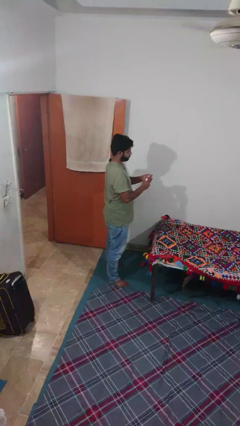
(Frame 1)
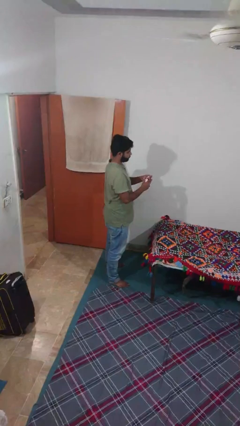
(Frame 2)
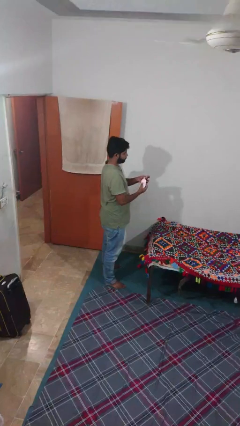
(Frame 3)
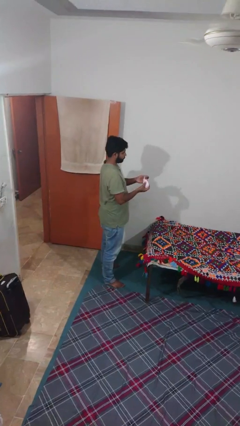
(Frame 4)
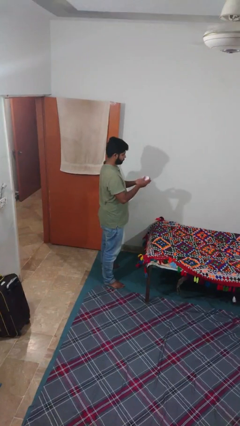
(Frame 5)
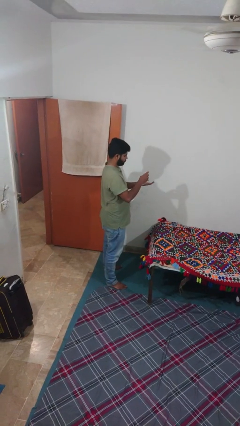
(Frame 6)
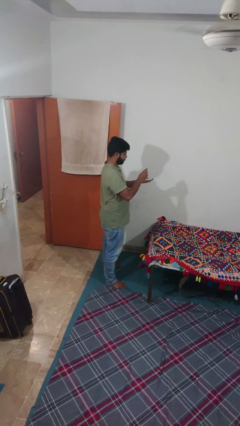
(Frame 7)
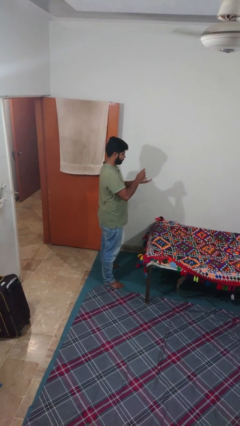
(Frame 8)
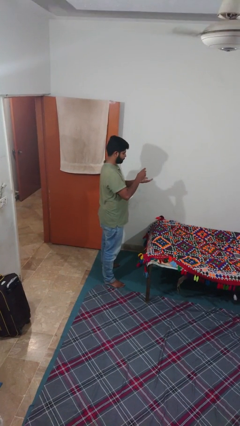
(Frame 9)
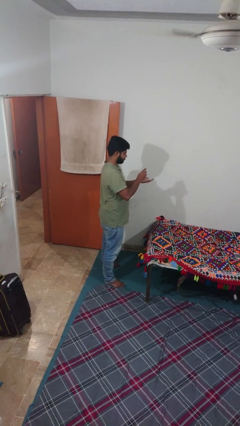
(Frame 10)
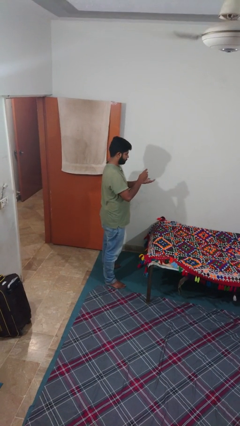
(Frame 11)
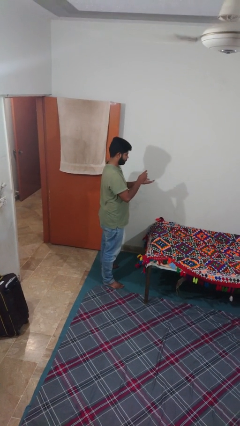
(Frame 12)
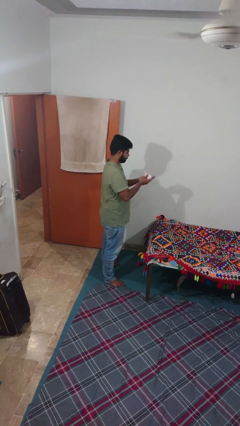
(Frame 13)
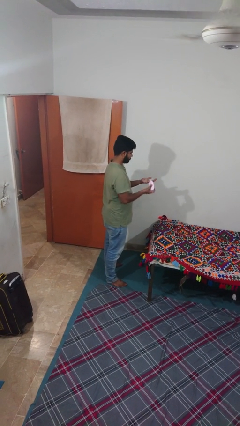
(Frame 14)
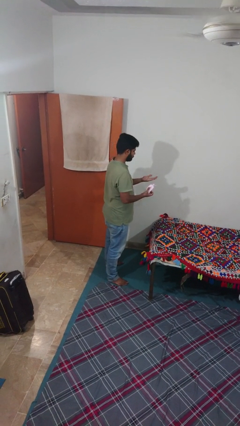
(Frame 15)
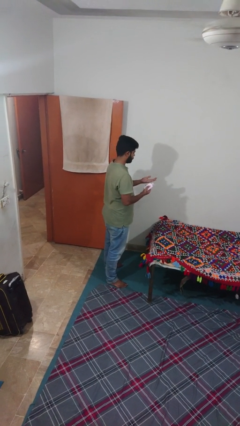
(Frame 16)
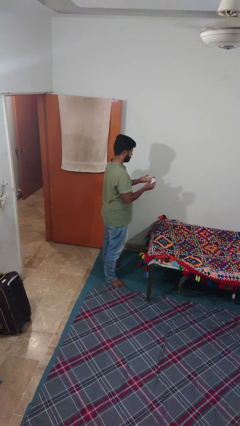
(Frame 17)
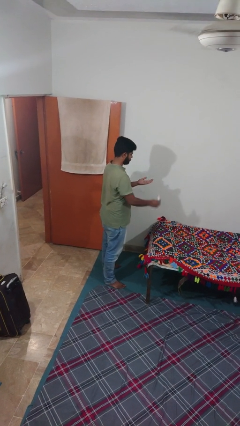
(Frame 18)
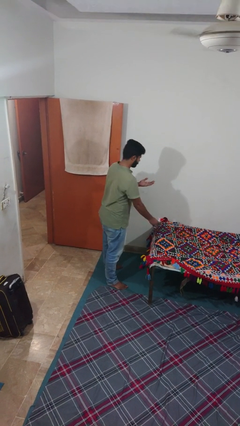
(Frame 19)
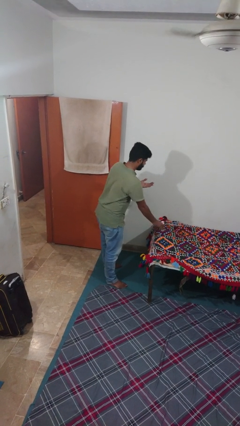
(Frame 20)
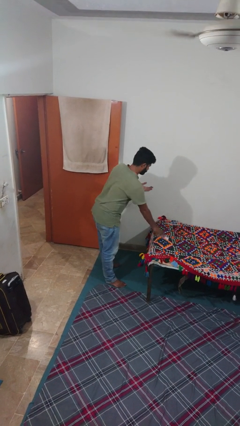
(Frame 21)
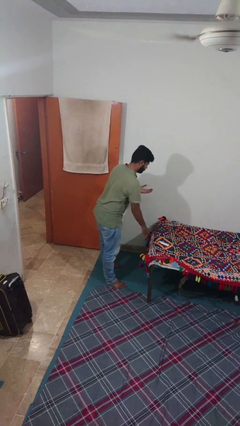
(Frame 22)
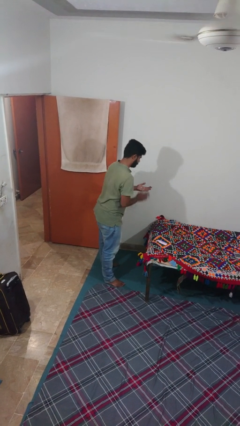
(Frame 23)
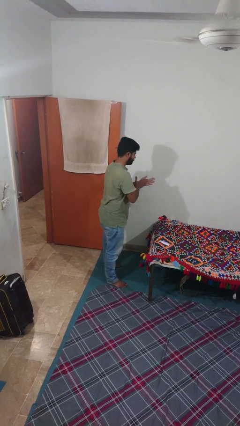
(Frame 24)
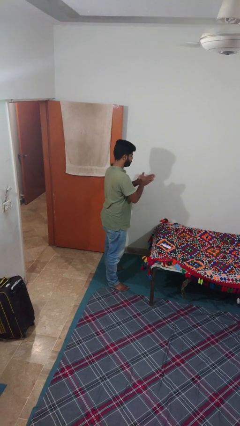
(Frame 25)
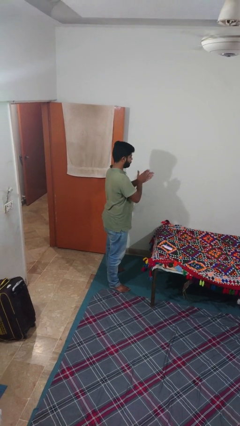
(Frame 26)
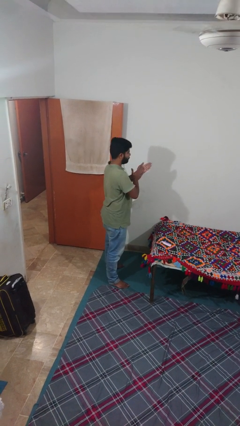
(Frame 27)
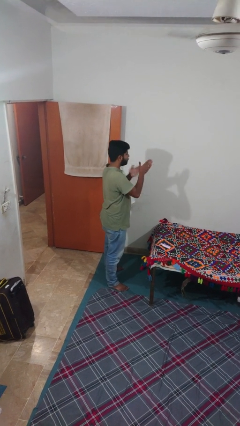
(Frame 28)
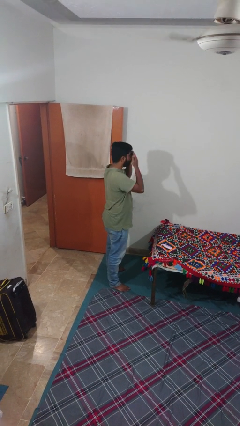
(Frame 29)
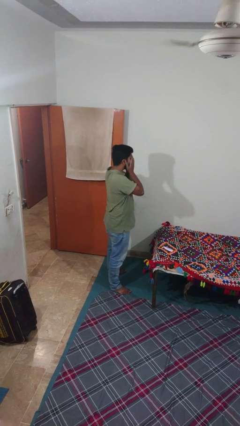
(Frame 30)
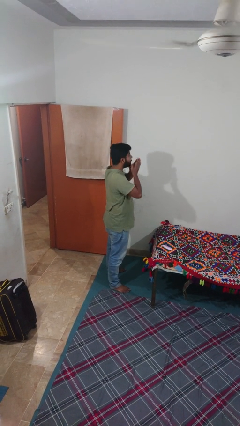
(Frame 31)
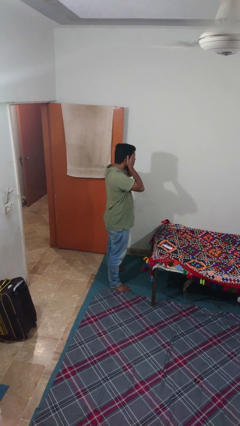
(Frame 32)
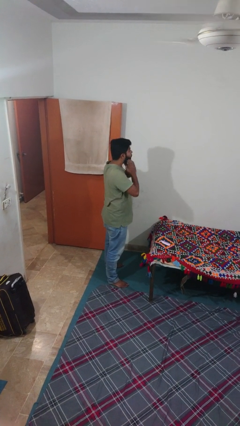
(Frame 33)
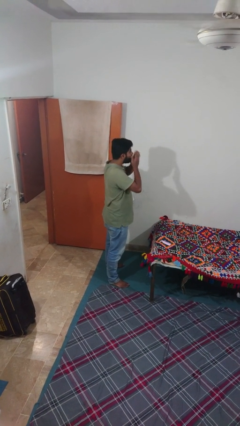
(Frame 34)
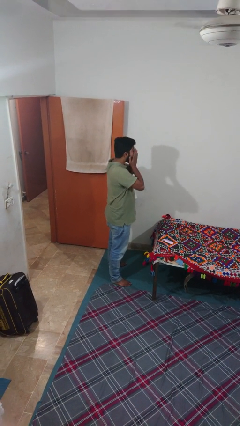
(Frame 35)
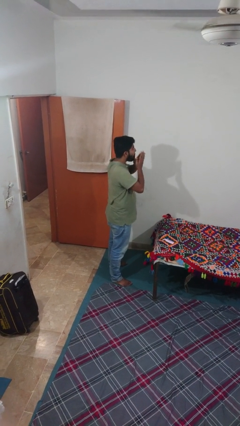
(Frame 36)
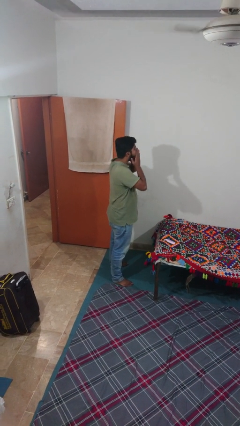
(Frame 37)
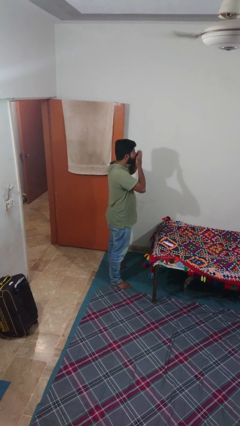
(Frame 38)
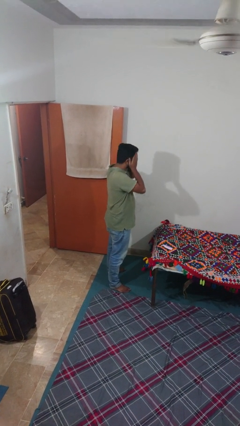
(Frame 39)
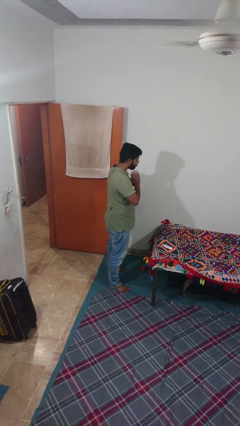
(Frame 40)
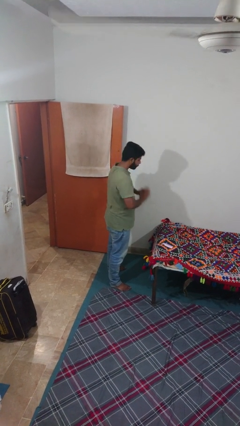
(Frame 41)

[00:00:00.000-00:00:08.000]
person applies facial moisturizer

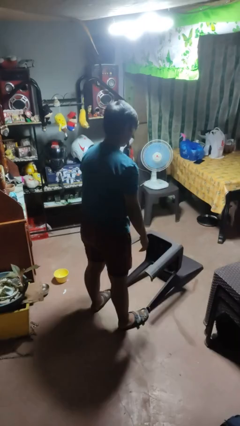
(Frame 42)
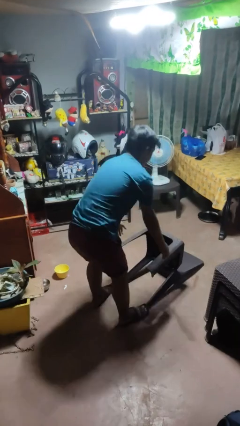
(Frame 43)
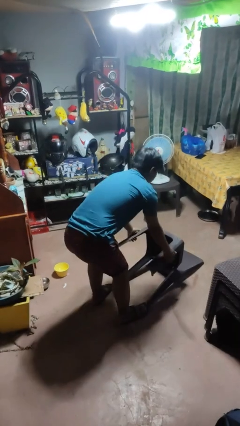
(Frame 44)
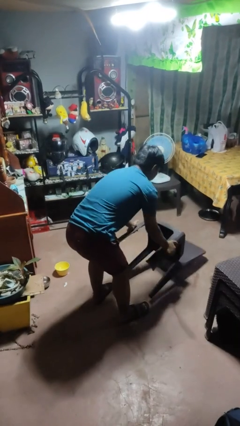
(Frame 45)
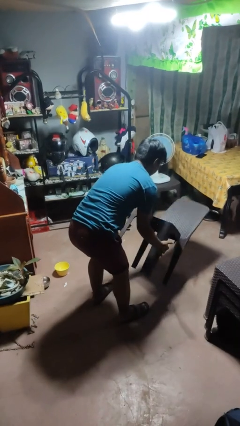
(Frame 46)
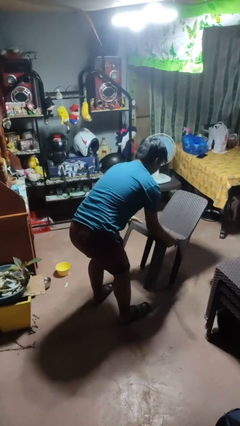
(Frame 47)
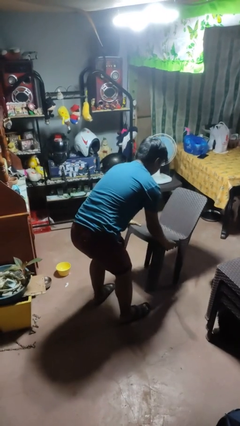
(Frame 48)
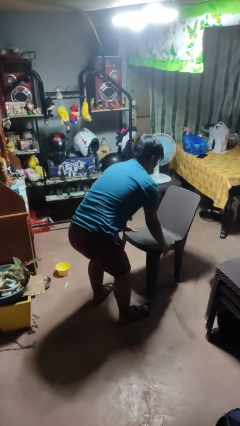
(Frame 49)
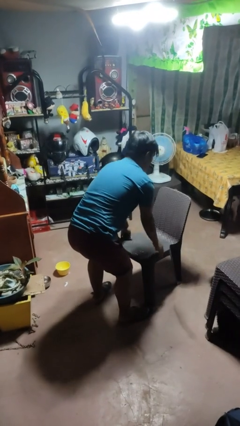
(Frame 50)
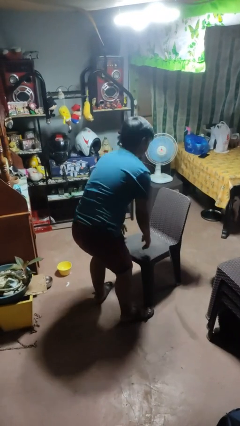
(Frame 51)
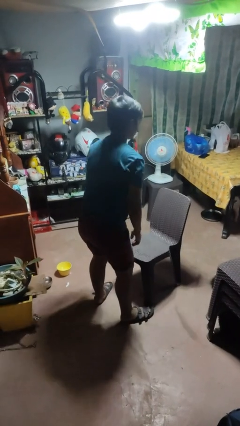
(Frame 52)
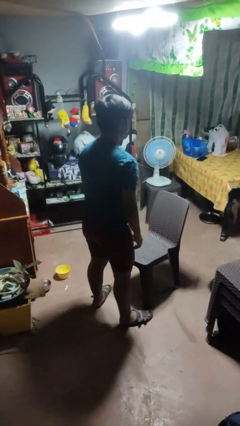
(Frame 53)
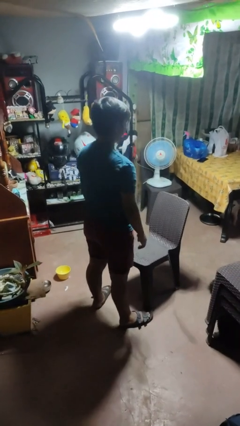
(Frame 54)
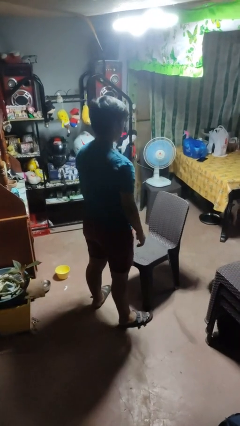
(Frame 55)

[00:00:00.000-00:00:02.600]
person sets upright furniture

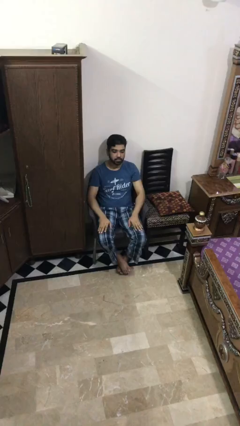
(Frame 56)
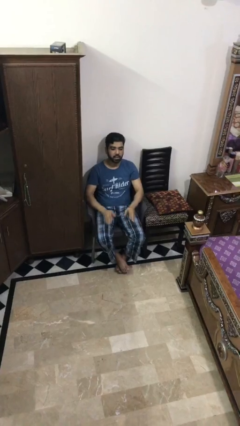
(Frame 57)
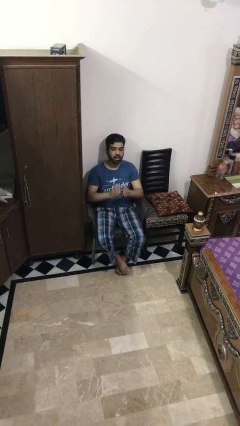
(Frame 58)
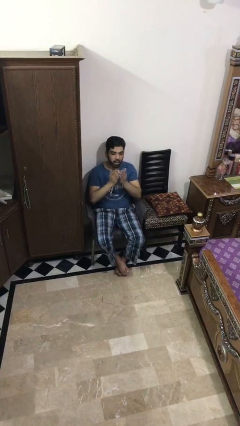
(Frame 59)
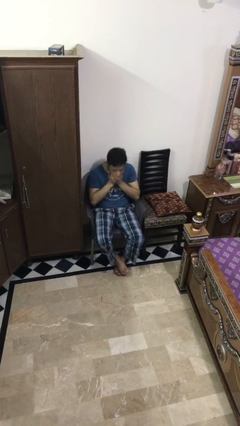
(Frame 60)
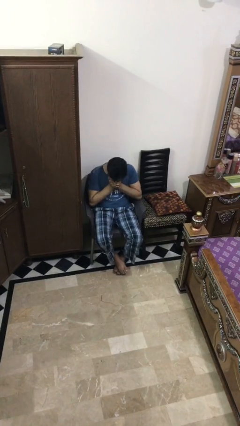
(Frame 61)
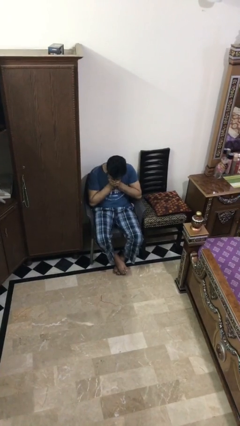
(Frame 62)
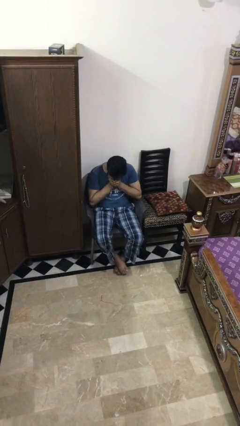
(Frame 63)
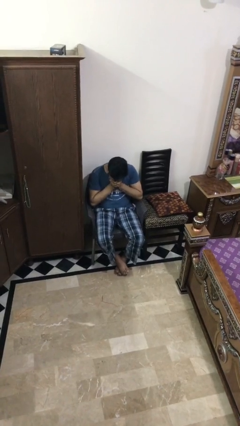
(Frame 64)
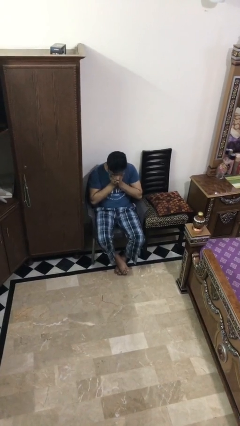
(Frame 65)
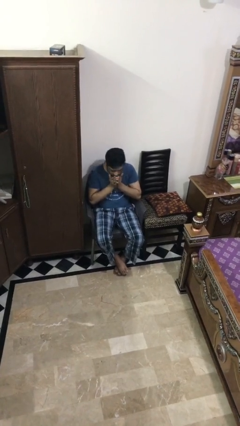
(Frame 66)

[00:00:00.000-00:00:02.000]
person sneezes into hand

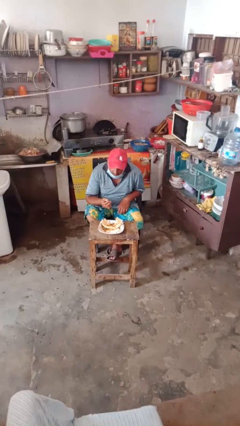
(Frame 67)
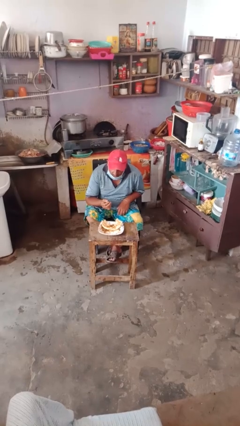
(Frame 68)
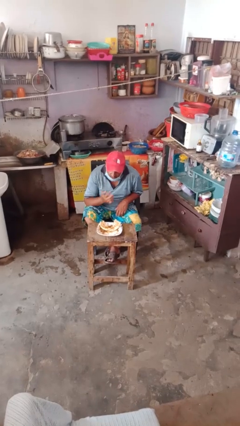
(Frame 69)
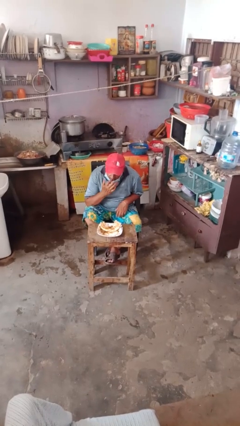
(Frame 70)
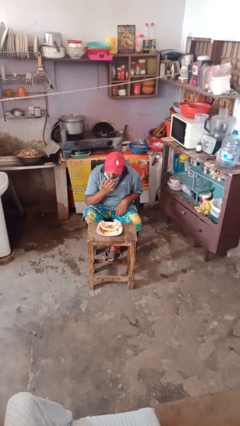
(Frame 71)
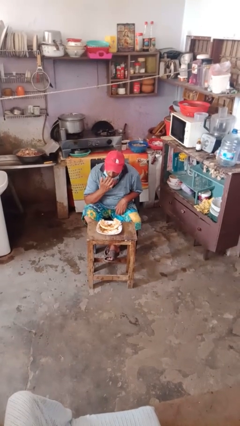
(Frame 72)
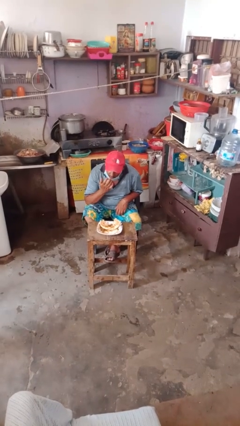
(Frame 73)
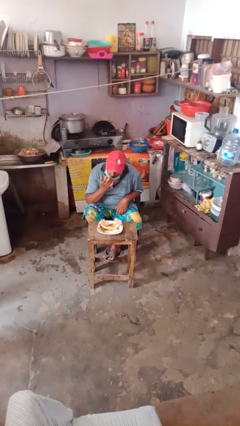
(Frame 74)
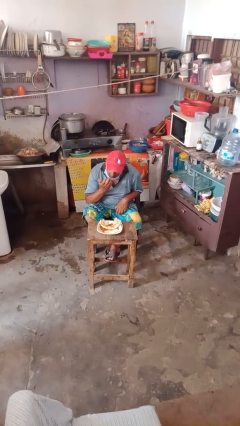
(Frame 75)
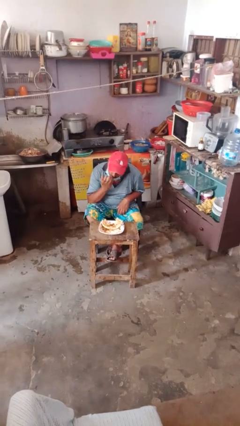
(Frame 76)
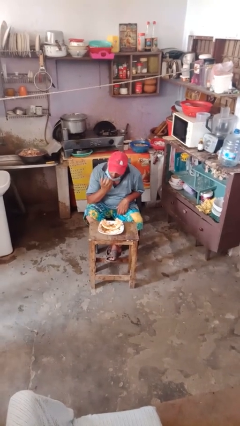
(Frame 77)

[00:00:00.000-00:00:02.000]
person licks fingers

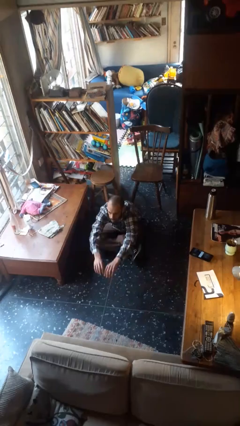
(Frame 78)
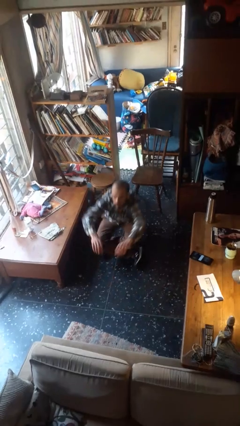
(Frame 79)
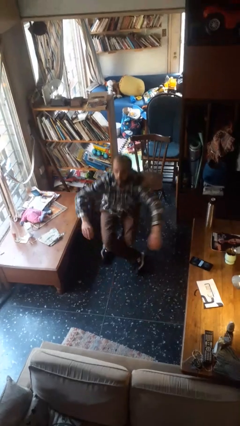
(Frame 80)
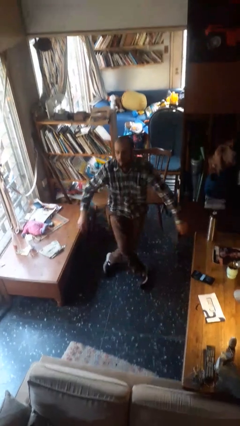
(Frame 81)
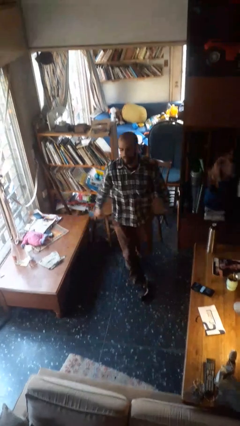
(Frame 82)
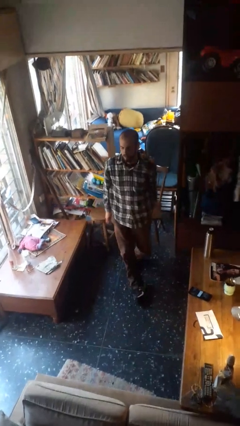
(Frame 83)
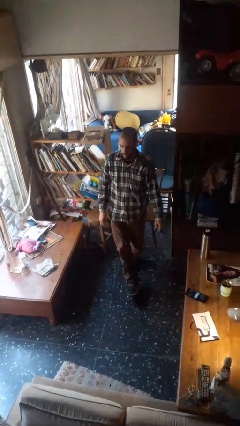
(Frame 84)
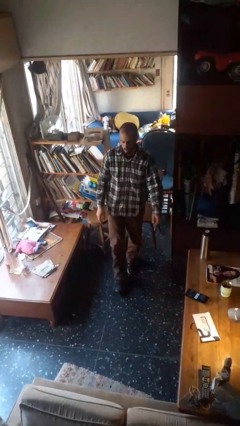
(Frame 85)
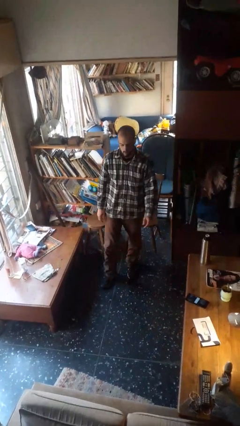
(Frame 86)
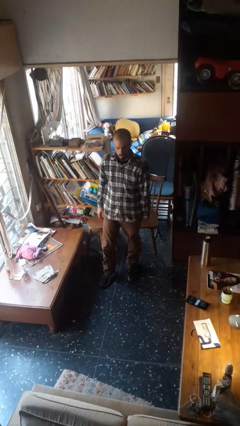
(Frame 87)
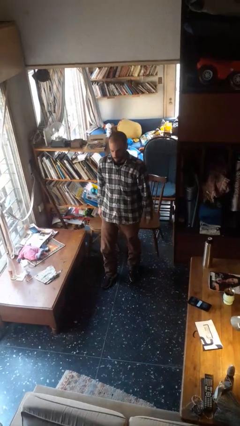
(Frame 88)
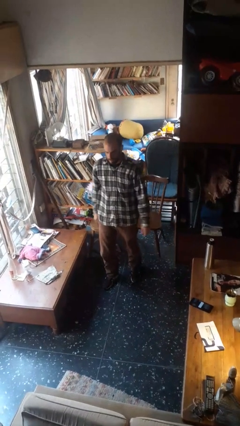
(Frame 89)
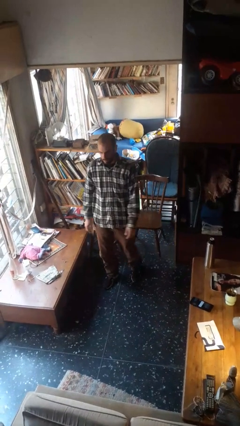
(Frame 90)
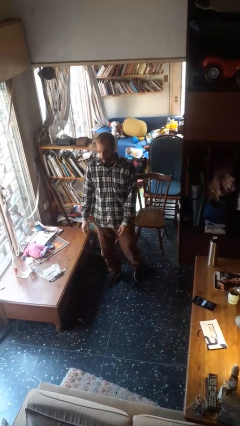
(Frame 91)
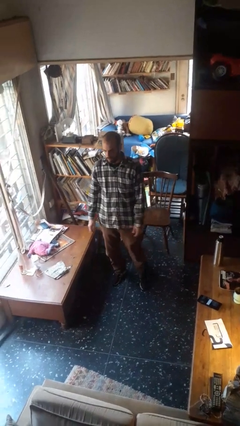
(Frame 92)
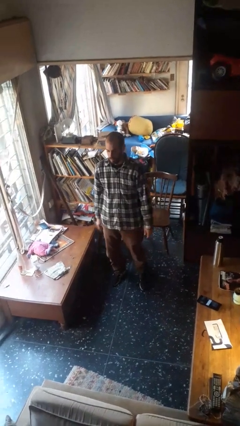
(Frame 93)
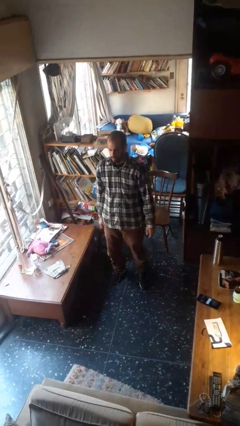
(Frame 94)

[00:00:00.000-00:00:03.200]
person stands up from floor

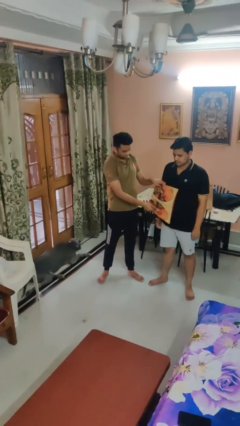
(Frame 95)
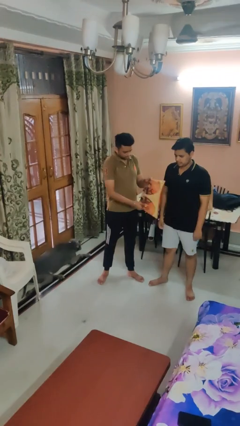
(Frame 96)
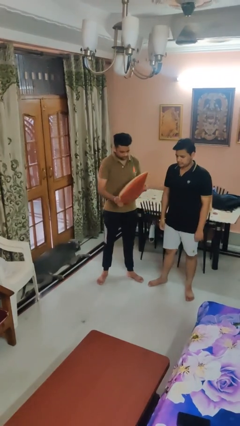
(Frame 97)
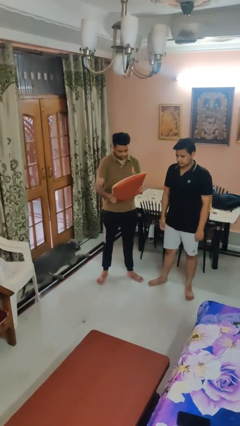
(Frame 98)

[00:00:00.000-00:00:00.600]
person hits person with pillow
